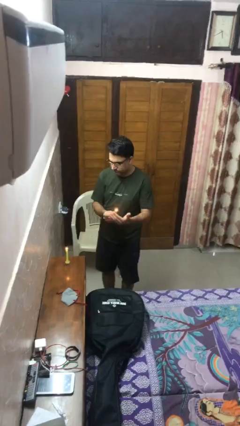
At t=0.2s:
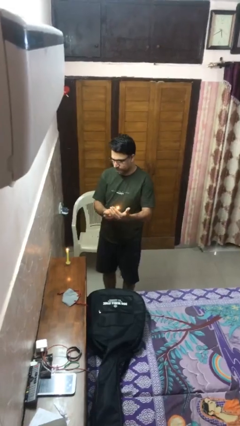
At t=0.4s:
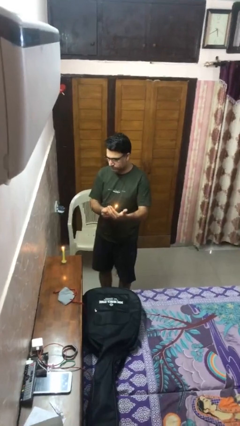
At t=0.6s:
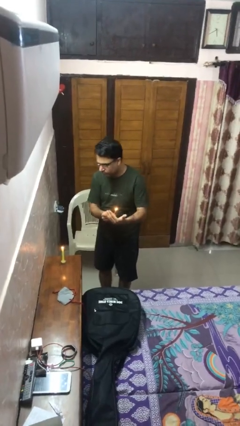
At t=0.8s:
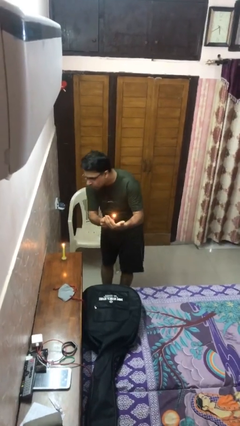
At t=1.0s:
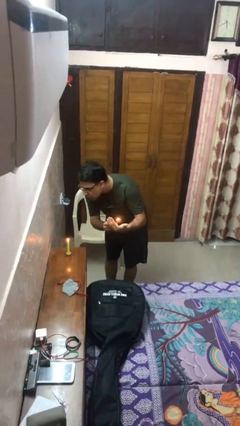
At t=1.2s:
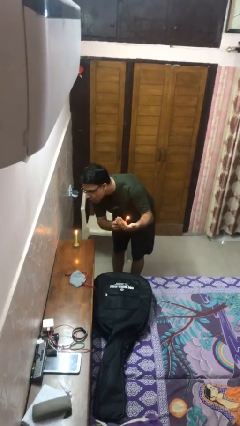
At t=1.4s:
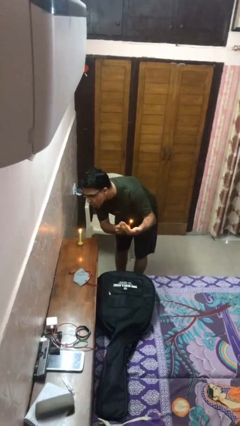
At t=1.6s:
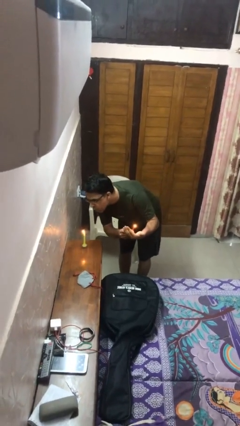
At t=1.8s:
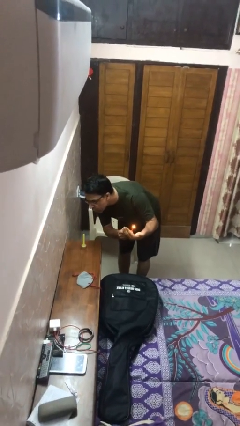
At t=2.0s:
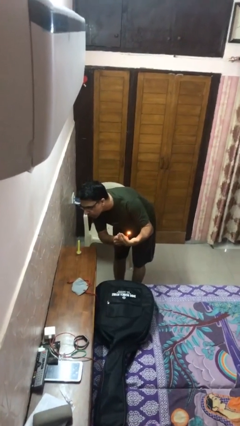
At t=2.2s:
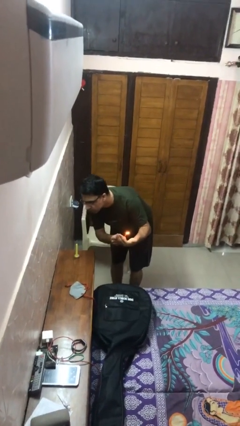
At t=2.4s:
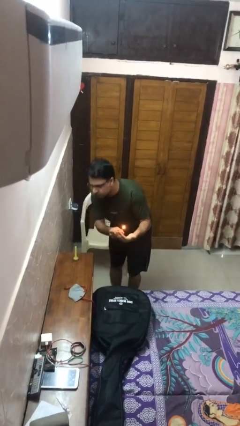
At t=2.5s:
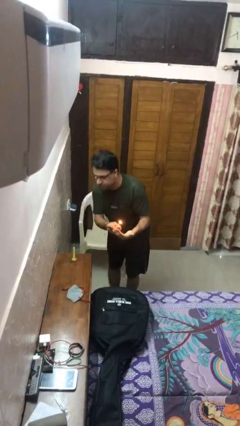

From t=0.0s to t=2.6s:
person extinguishes candle

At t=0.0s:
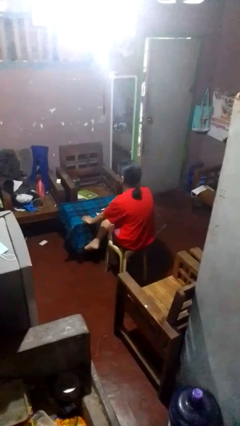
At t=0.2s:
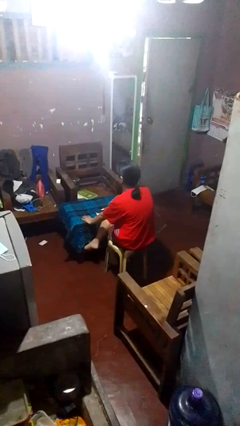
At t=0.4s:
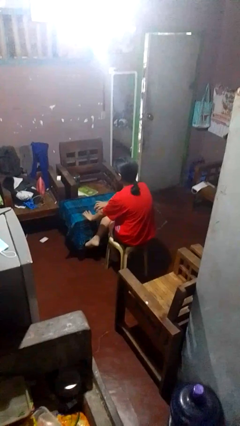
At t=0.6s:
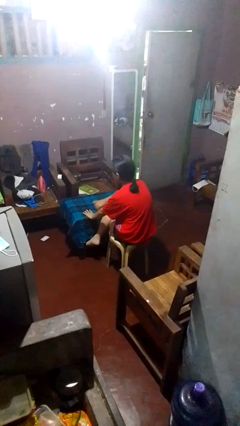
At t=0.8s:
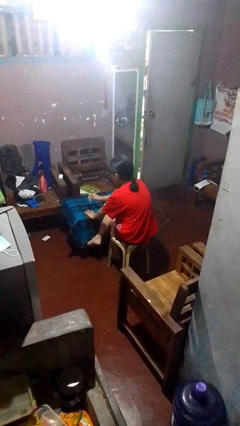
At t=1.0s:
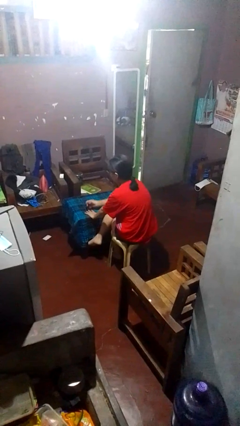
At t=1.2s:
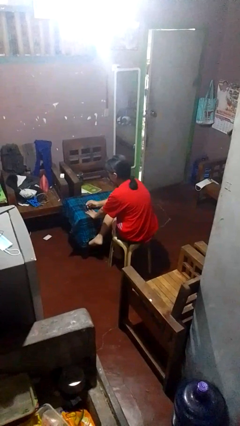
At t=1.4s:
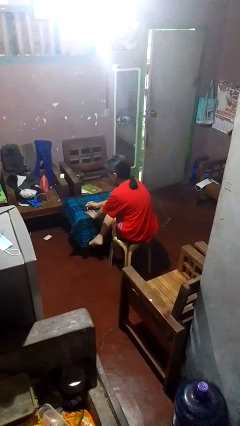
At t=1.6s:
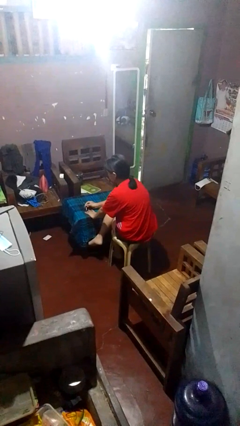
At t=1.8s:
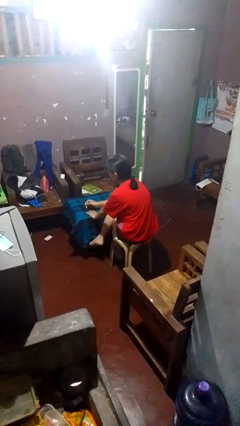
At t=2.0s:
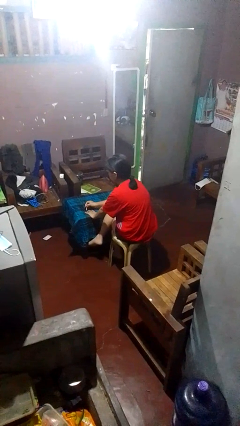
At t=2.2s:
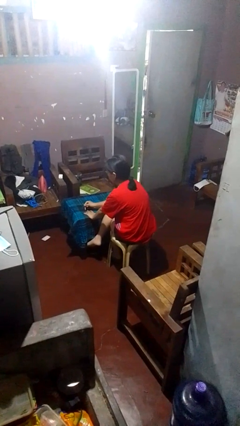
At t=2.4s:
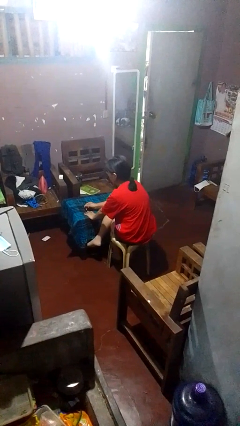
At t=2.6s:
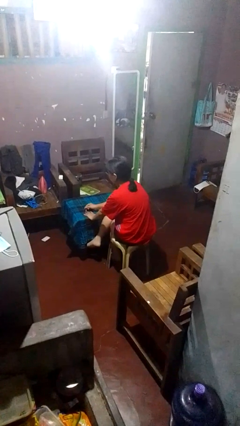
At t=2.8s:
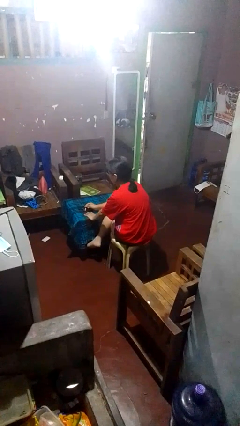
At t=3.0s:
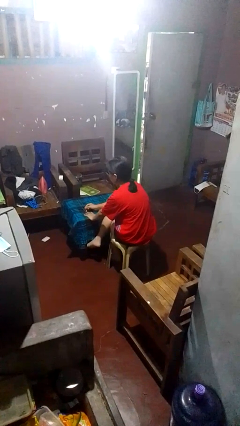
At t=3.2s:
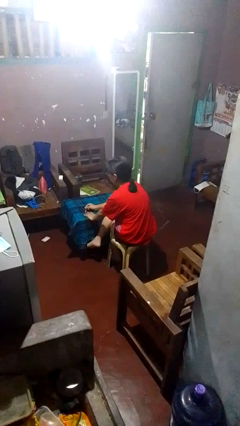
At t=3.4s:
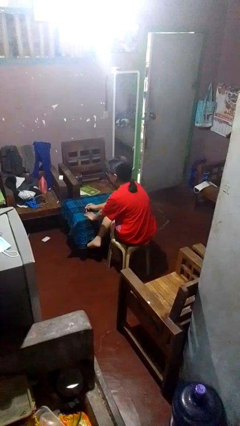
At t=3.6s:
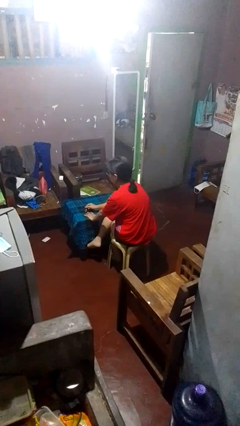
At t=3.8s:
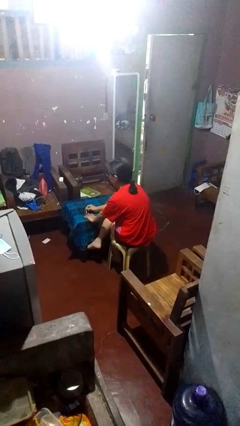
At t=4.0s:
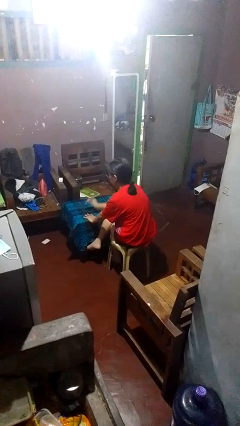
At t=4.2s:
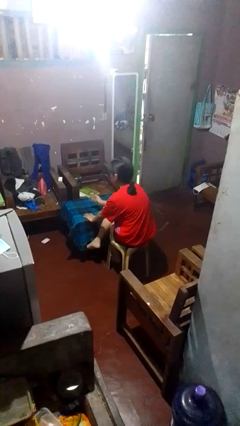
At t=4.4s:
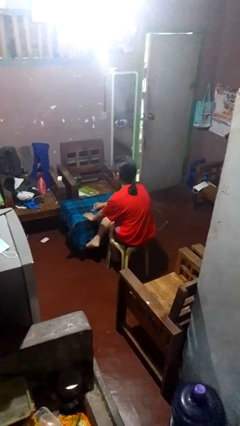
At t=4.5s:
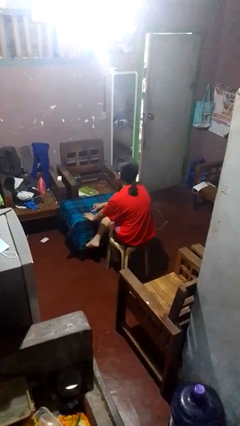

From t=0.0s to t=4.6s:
person paints fingernails

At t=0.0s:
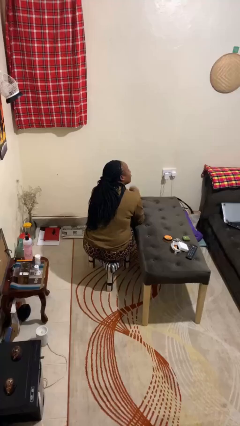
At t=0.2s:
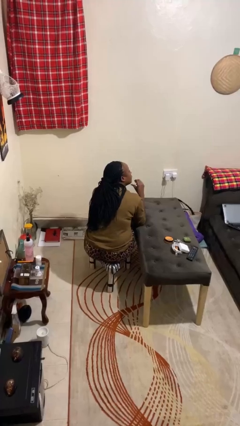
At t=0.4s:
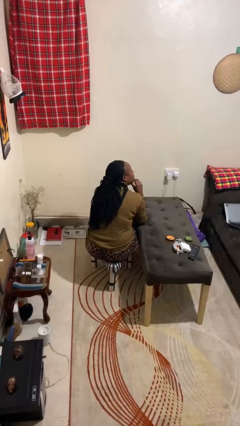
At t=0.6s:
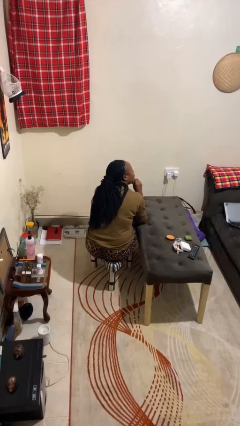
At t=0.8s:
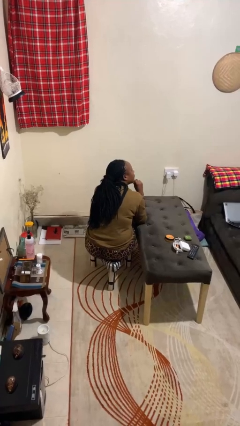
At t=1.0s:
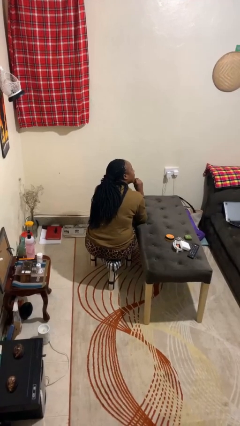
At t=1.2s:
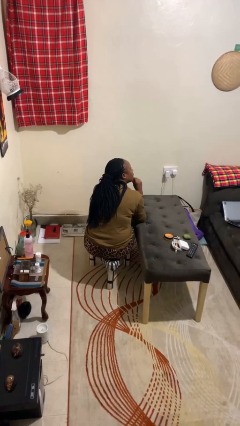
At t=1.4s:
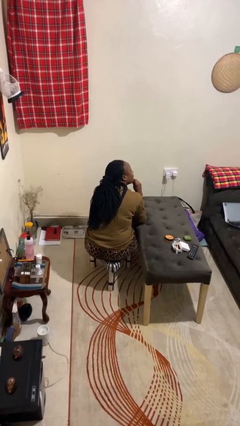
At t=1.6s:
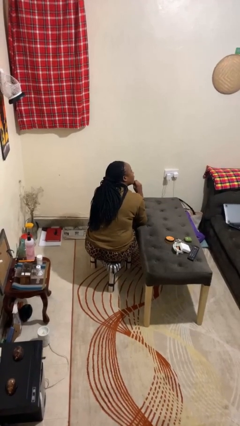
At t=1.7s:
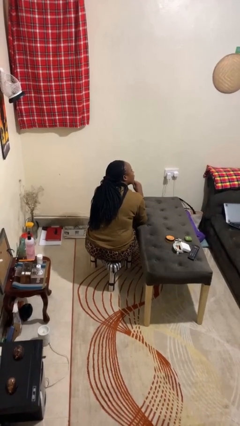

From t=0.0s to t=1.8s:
person strokes chin

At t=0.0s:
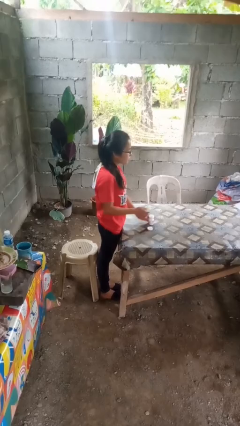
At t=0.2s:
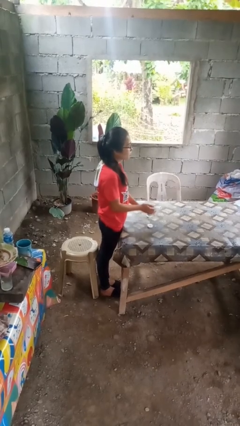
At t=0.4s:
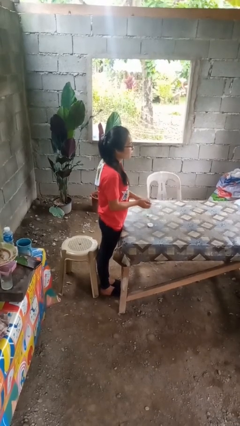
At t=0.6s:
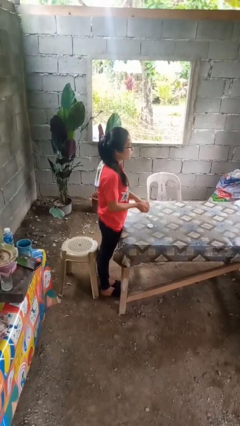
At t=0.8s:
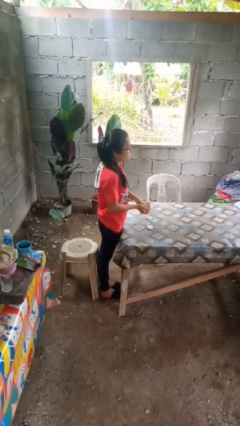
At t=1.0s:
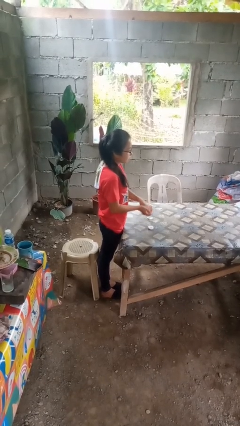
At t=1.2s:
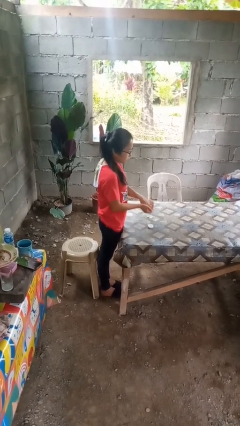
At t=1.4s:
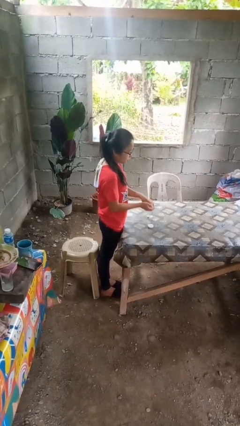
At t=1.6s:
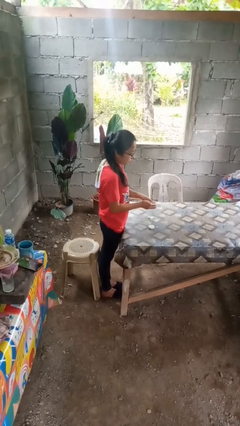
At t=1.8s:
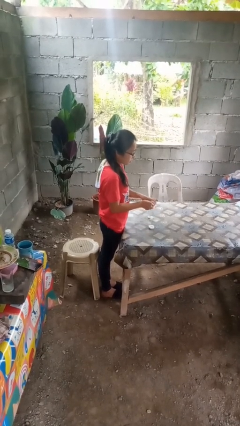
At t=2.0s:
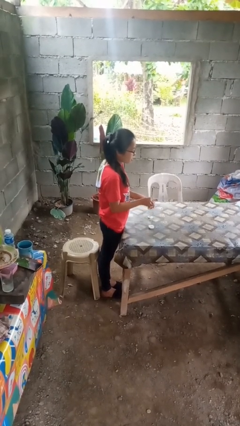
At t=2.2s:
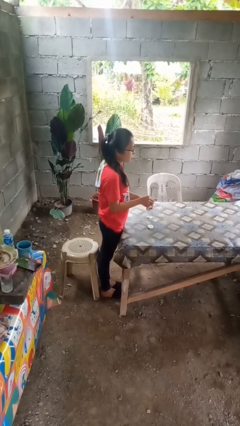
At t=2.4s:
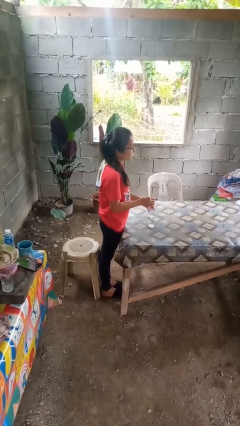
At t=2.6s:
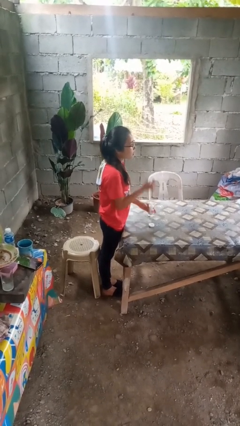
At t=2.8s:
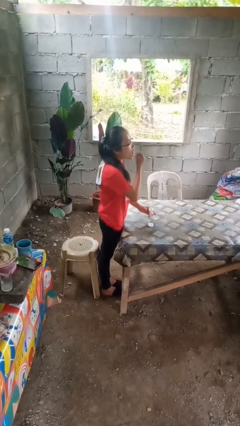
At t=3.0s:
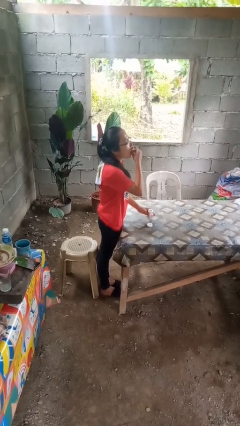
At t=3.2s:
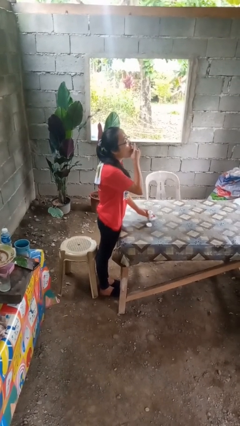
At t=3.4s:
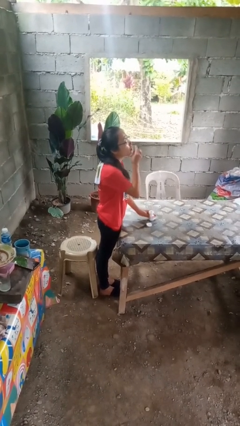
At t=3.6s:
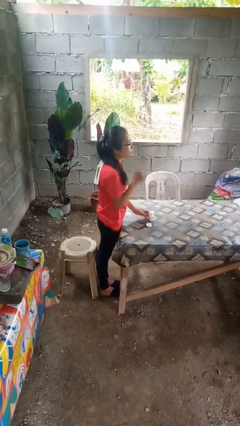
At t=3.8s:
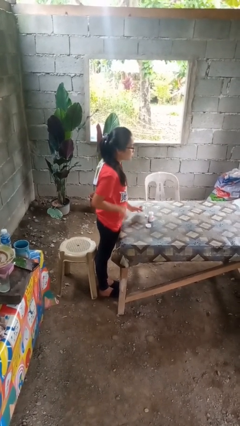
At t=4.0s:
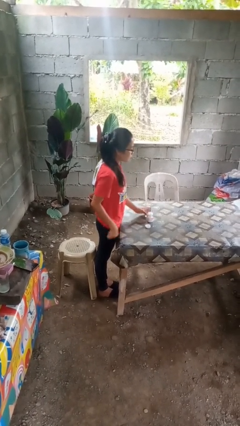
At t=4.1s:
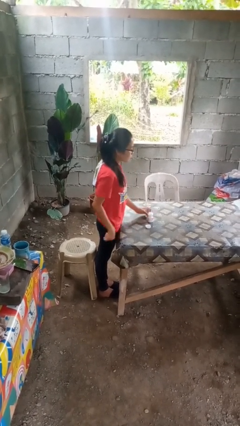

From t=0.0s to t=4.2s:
person takes medicine pills

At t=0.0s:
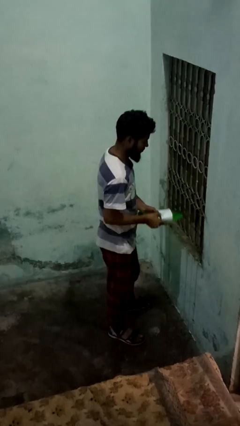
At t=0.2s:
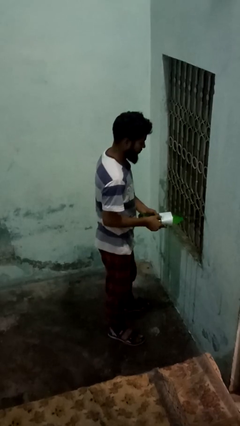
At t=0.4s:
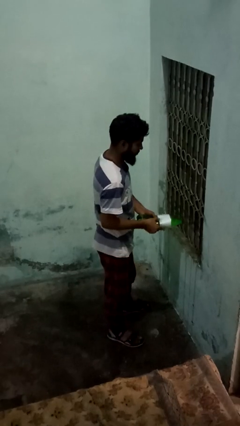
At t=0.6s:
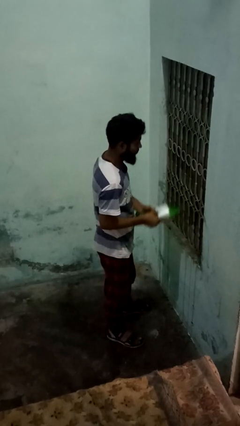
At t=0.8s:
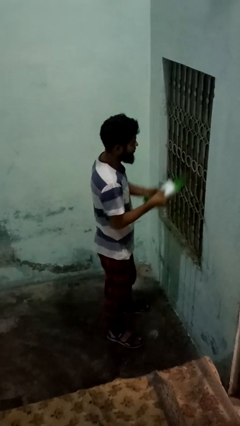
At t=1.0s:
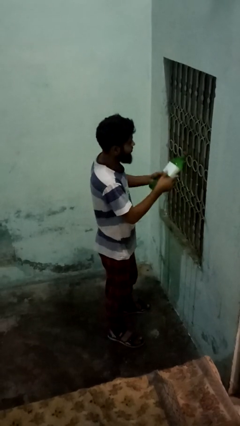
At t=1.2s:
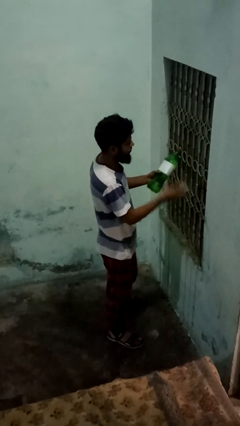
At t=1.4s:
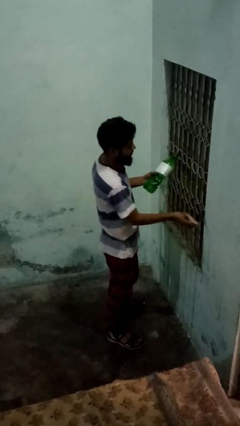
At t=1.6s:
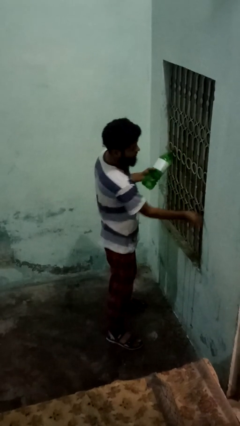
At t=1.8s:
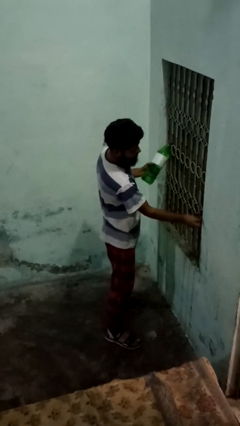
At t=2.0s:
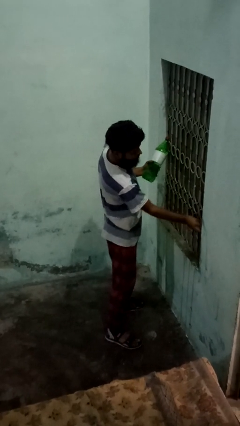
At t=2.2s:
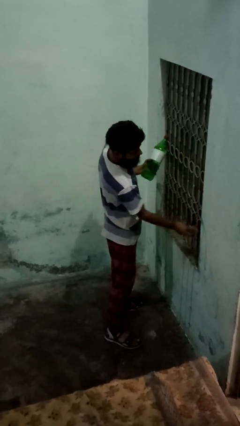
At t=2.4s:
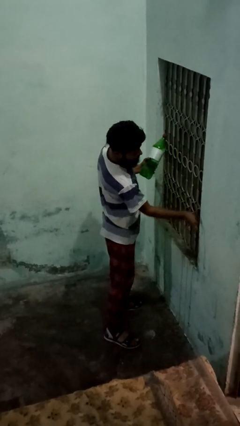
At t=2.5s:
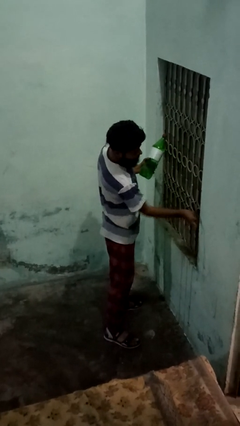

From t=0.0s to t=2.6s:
person washes window

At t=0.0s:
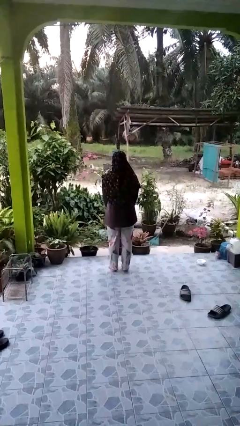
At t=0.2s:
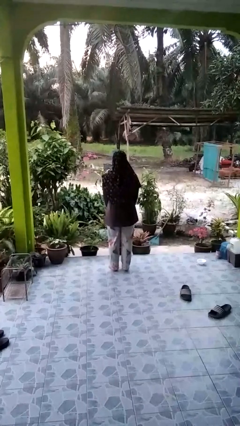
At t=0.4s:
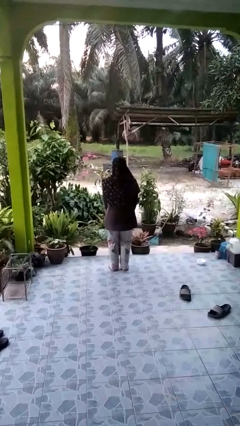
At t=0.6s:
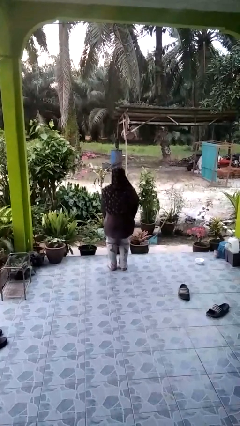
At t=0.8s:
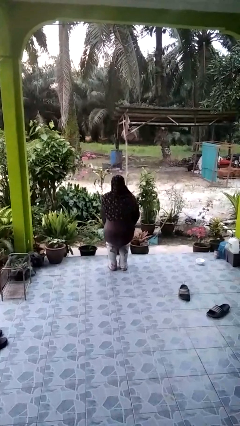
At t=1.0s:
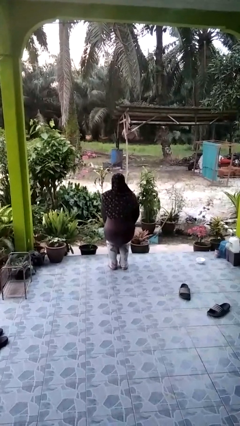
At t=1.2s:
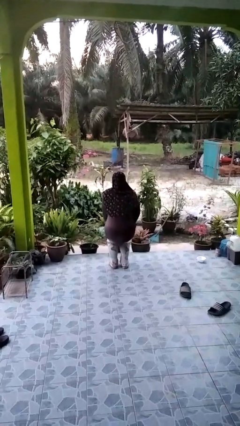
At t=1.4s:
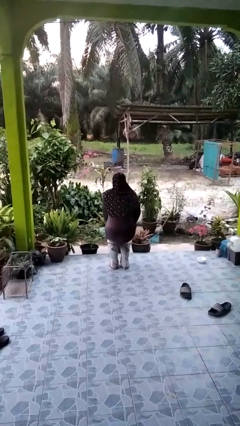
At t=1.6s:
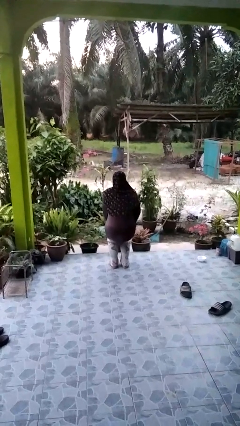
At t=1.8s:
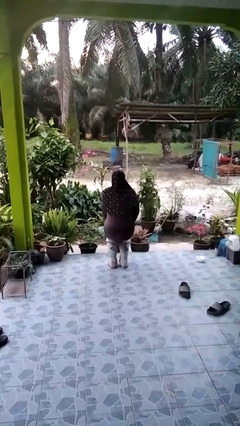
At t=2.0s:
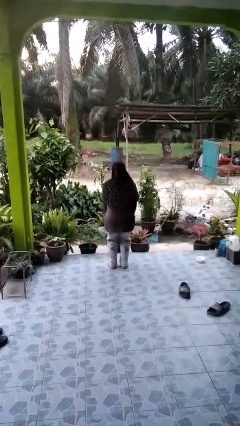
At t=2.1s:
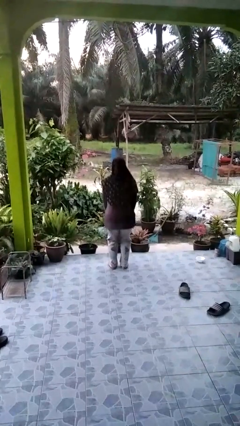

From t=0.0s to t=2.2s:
person squats
